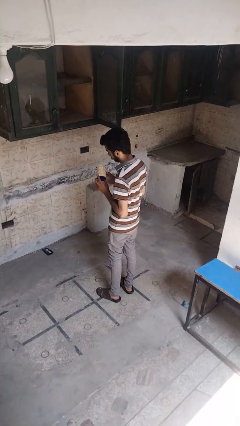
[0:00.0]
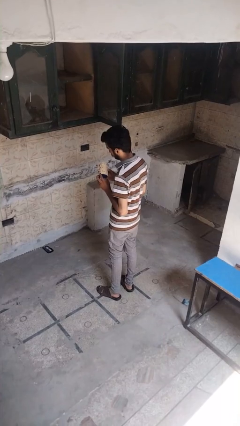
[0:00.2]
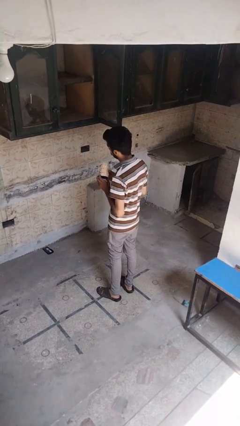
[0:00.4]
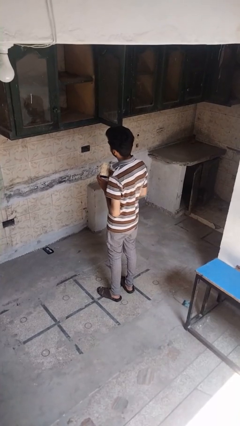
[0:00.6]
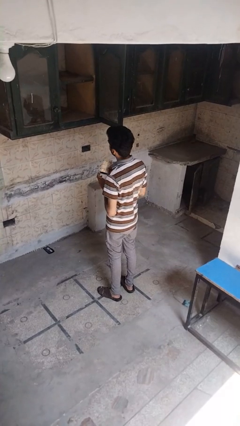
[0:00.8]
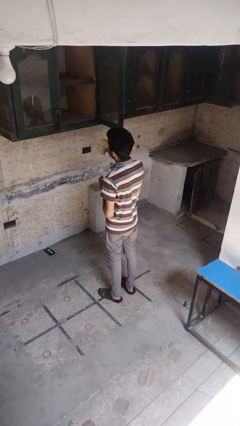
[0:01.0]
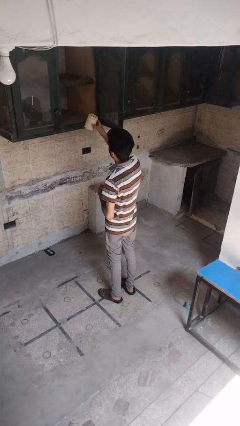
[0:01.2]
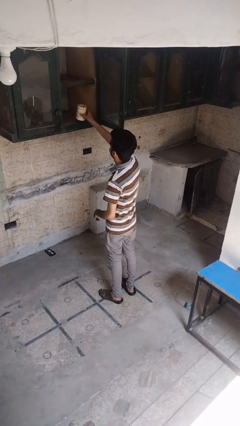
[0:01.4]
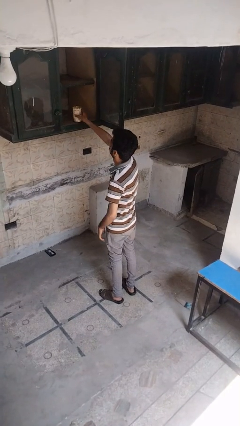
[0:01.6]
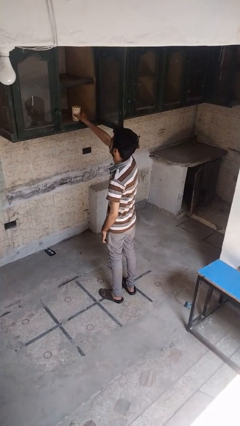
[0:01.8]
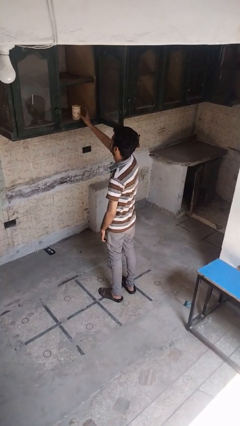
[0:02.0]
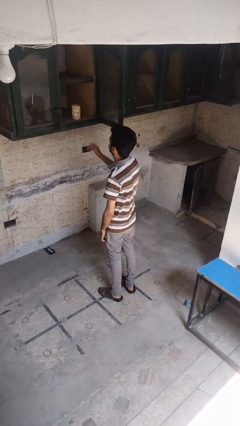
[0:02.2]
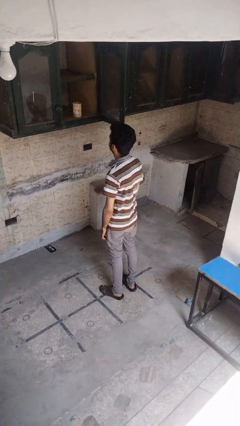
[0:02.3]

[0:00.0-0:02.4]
person puts down object into cabinet

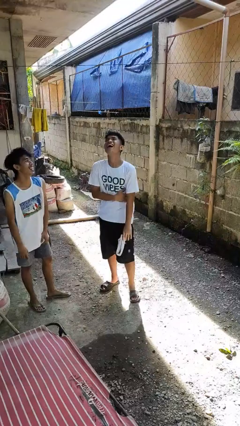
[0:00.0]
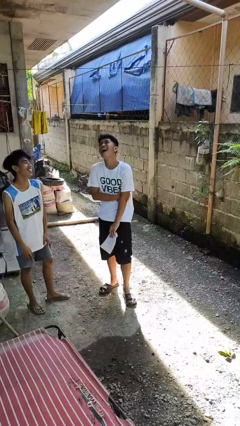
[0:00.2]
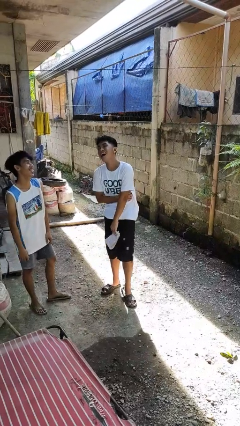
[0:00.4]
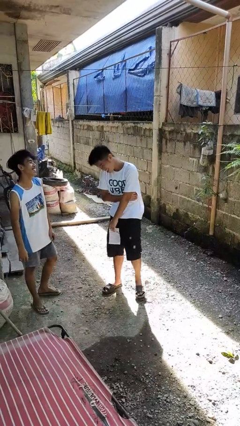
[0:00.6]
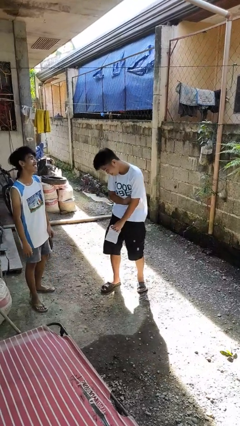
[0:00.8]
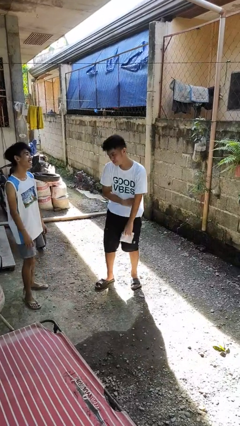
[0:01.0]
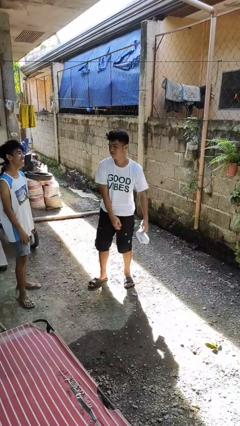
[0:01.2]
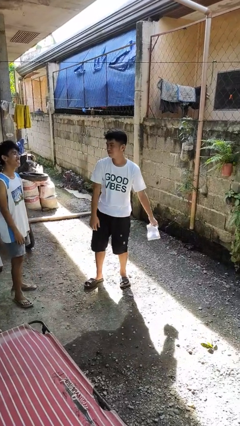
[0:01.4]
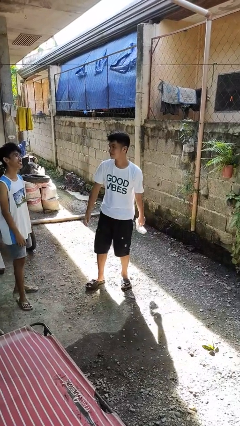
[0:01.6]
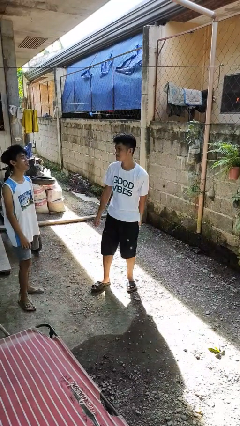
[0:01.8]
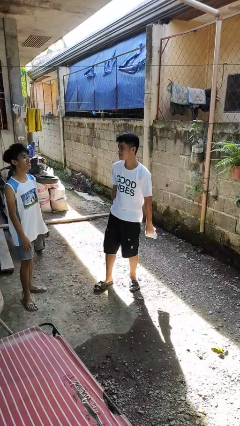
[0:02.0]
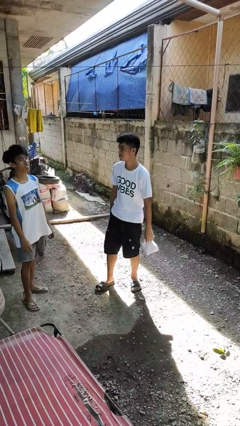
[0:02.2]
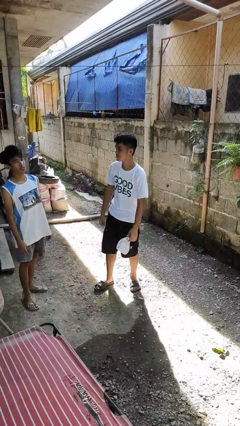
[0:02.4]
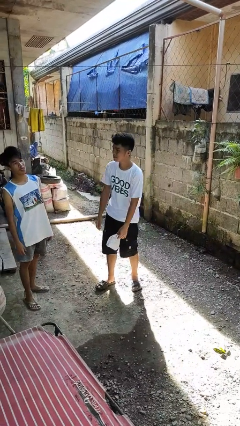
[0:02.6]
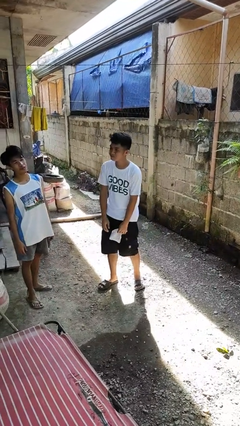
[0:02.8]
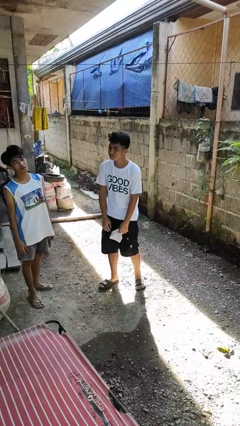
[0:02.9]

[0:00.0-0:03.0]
person laughs with person

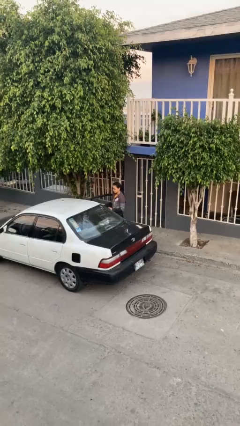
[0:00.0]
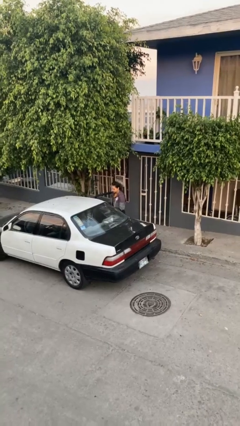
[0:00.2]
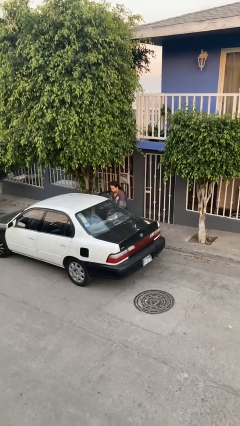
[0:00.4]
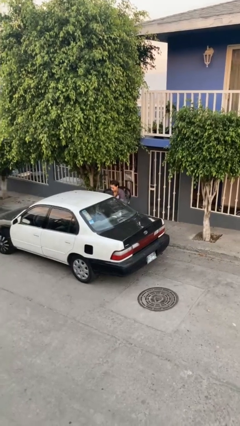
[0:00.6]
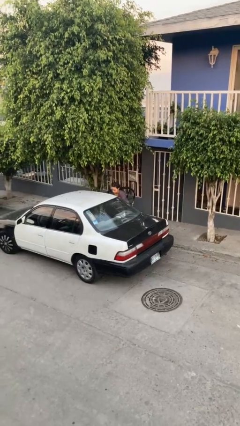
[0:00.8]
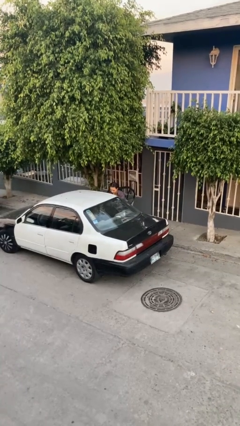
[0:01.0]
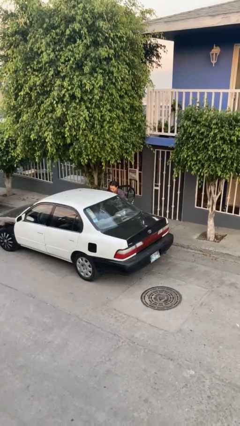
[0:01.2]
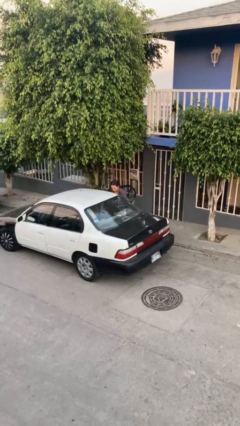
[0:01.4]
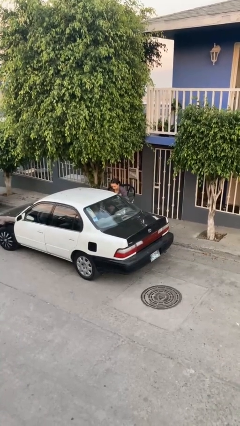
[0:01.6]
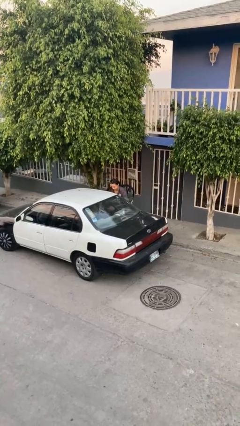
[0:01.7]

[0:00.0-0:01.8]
person loads car

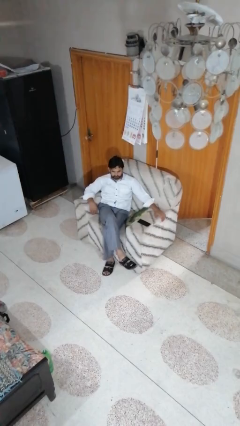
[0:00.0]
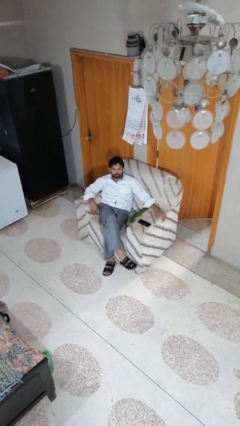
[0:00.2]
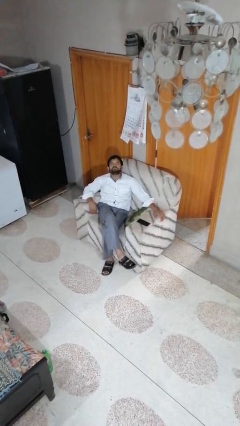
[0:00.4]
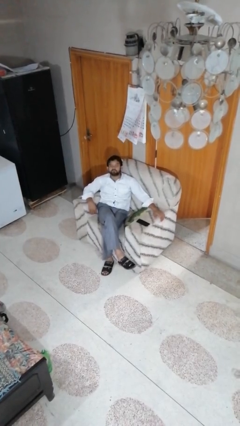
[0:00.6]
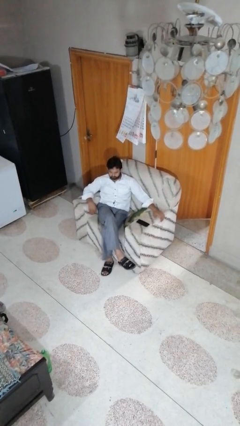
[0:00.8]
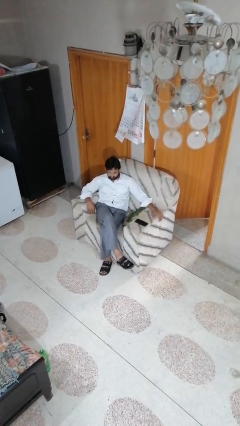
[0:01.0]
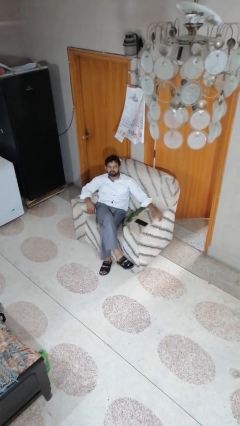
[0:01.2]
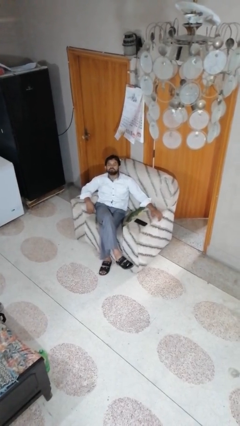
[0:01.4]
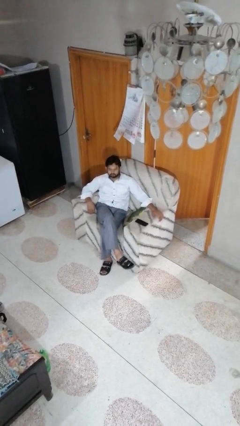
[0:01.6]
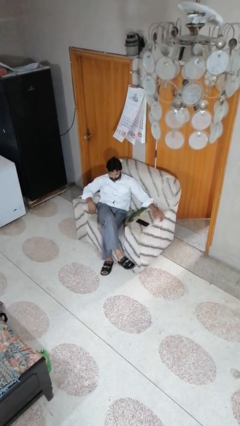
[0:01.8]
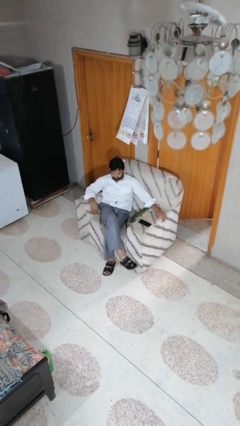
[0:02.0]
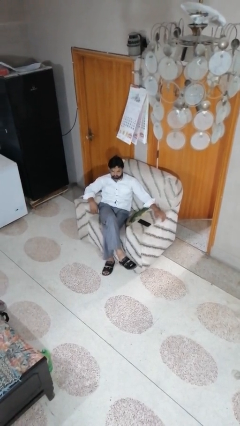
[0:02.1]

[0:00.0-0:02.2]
person nods head

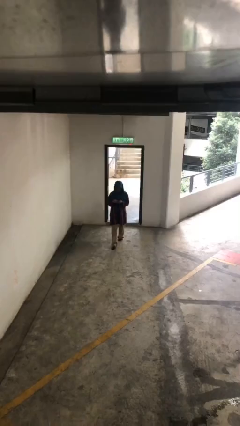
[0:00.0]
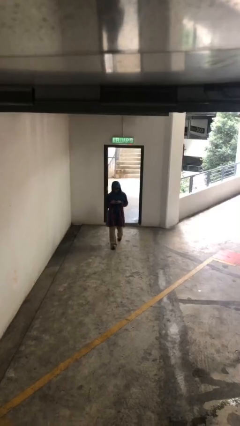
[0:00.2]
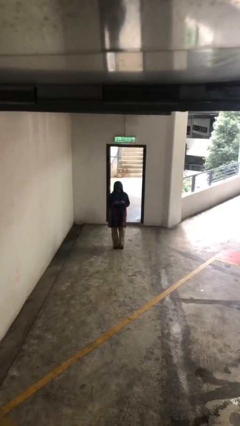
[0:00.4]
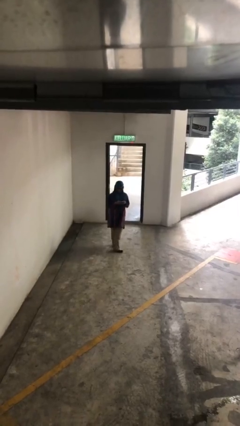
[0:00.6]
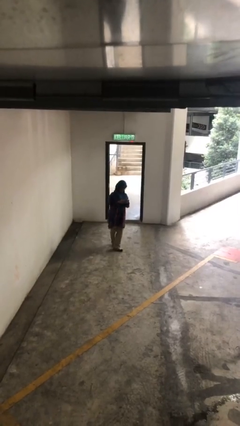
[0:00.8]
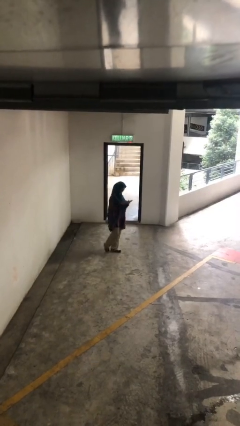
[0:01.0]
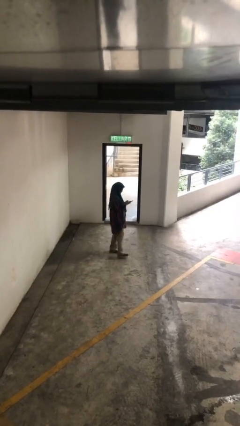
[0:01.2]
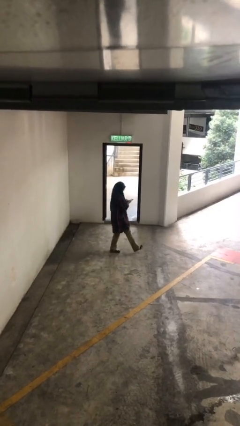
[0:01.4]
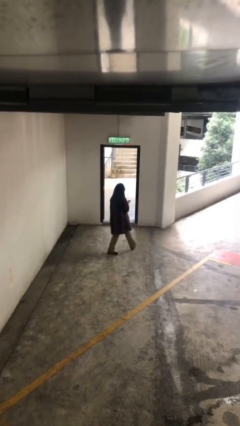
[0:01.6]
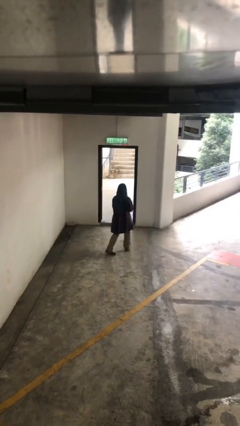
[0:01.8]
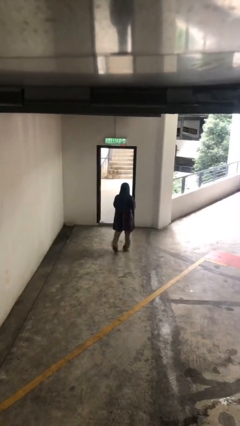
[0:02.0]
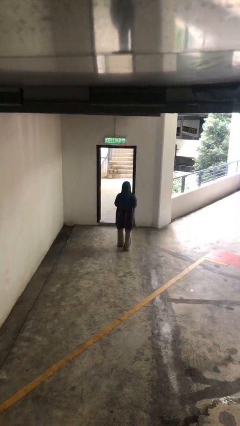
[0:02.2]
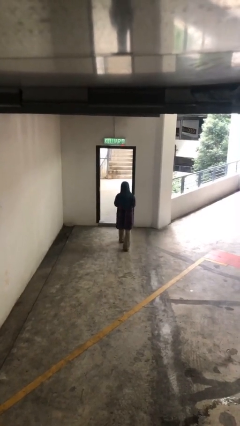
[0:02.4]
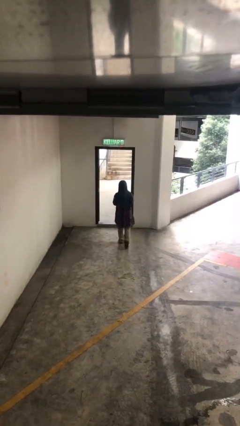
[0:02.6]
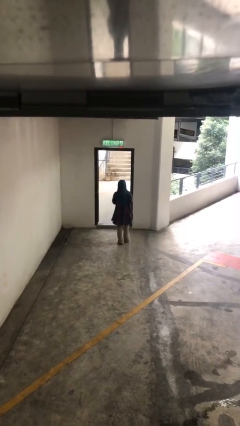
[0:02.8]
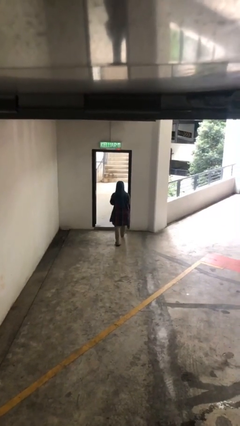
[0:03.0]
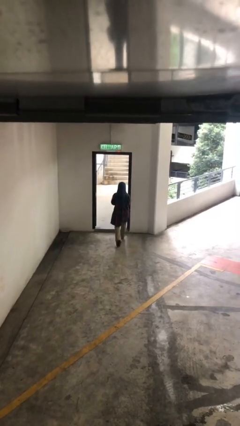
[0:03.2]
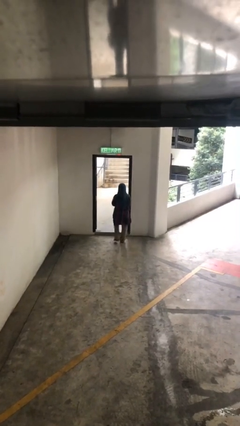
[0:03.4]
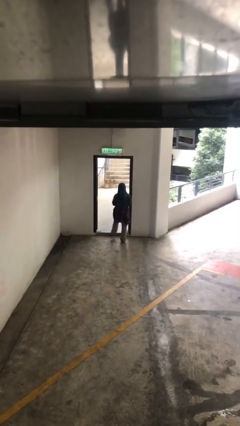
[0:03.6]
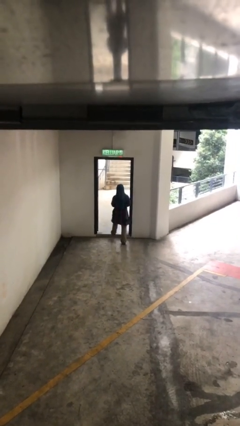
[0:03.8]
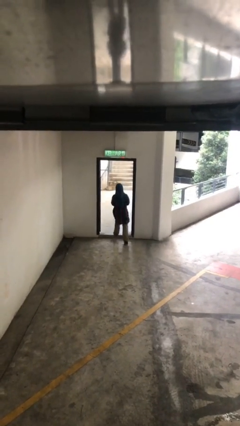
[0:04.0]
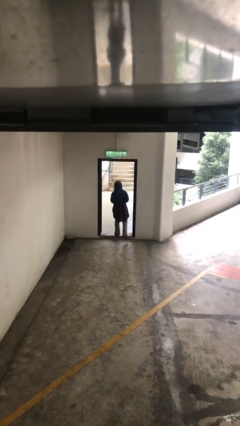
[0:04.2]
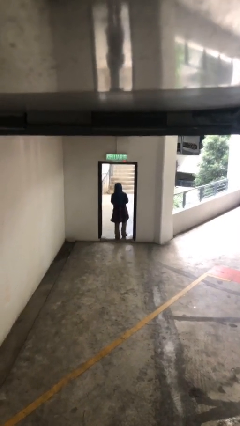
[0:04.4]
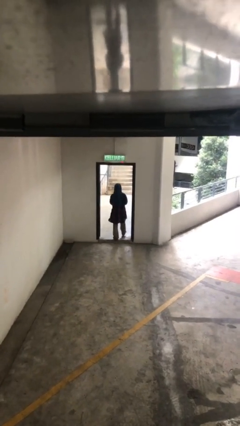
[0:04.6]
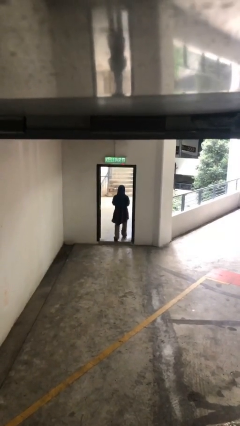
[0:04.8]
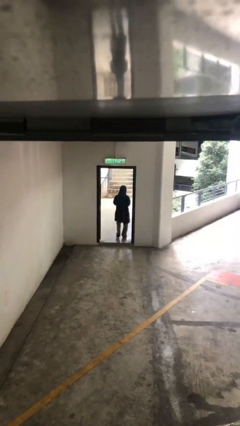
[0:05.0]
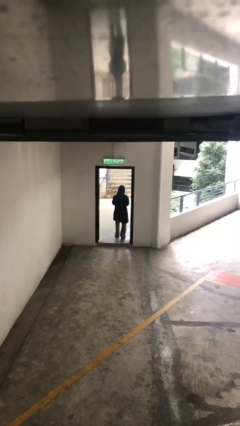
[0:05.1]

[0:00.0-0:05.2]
person exits scene through structure

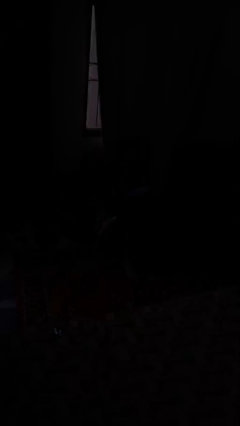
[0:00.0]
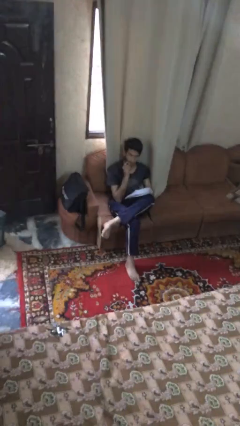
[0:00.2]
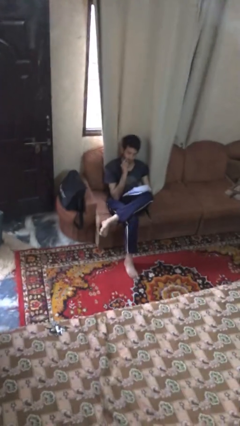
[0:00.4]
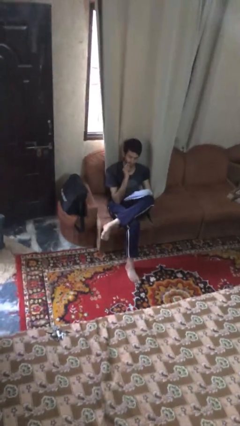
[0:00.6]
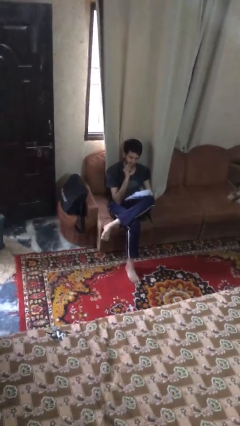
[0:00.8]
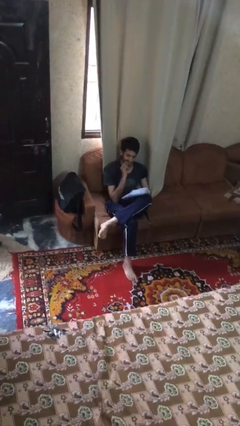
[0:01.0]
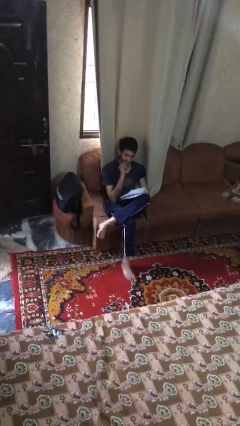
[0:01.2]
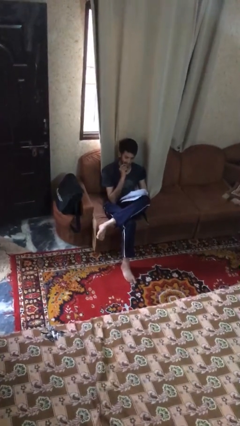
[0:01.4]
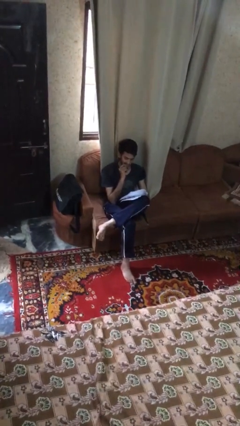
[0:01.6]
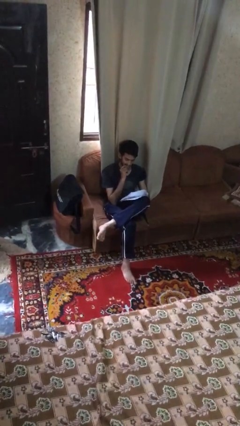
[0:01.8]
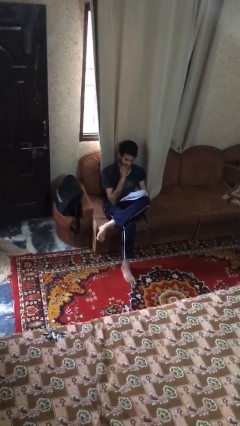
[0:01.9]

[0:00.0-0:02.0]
person reads document

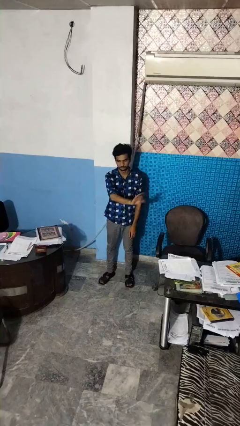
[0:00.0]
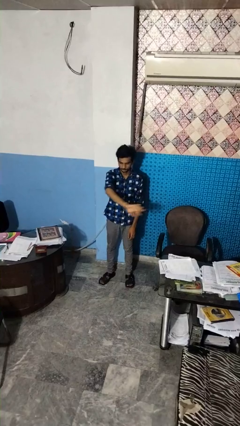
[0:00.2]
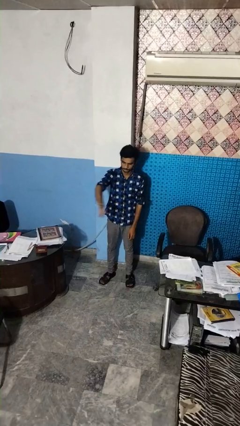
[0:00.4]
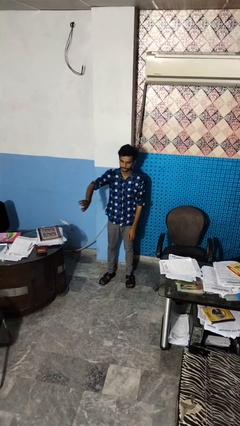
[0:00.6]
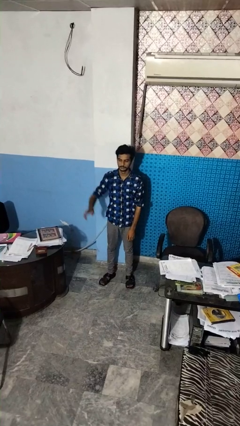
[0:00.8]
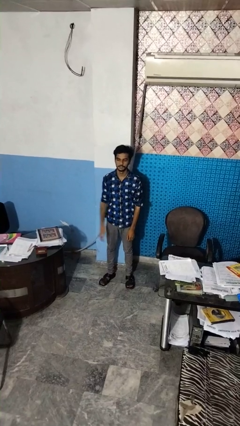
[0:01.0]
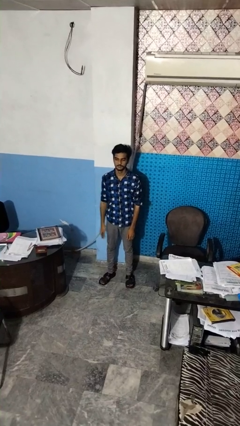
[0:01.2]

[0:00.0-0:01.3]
person gestures swipe right
